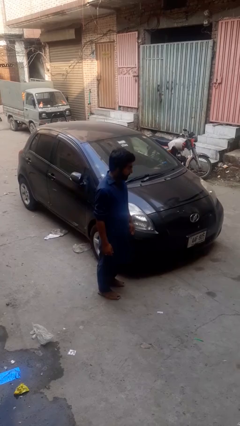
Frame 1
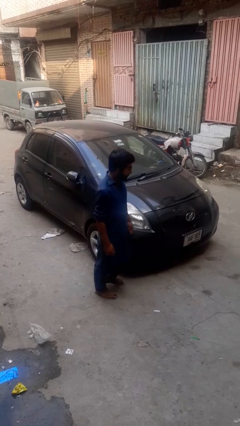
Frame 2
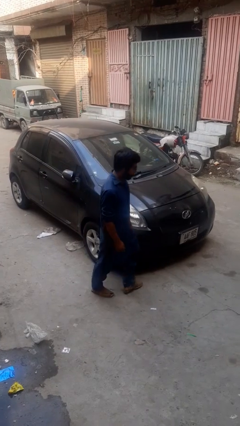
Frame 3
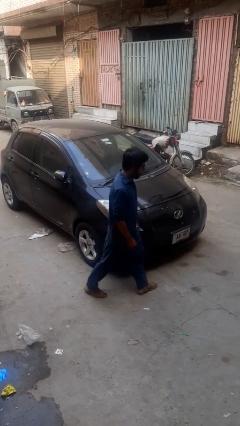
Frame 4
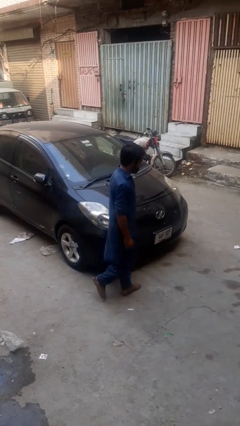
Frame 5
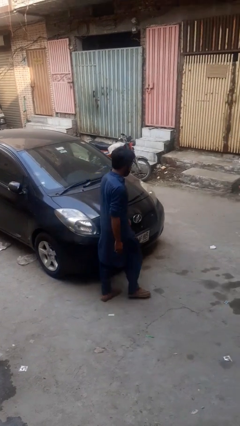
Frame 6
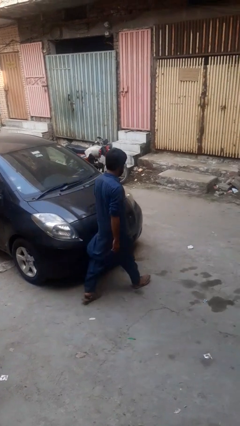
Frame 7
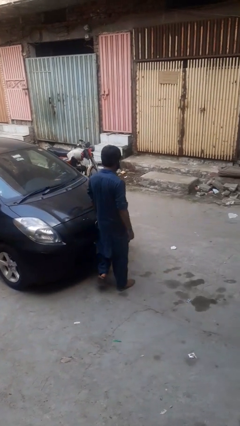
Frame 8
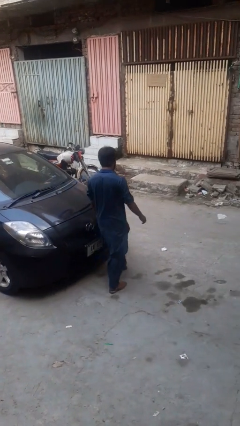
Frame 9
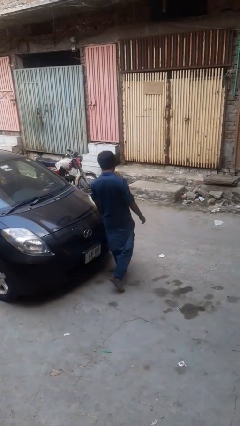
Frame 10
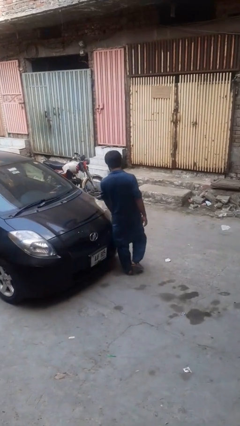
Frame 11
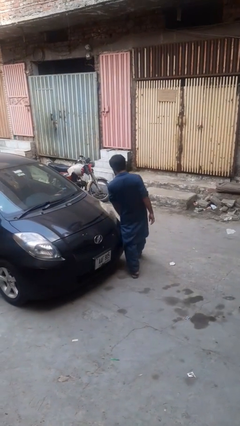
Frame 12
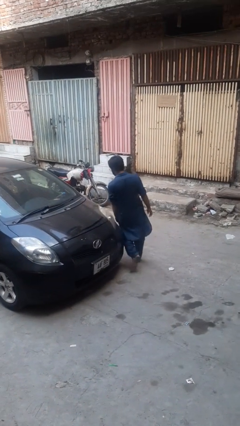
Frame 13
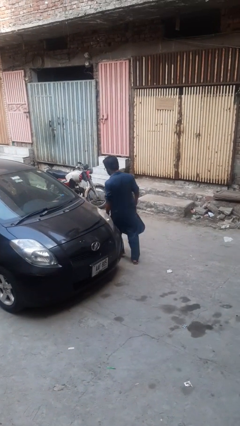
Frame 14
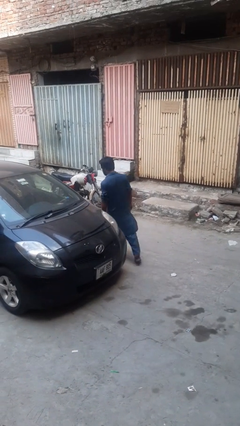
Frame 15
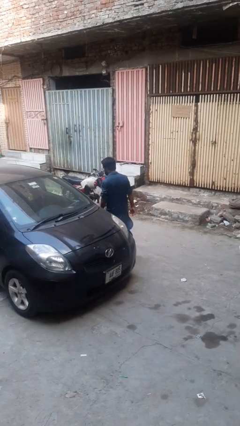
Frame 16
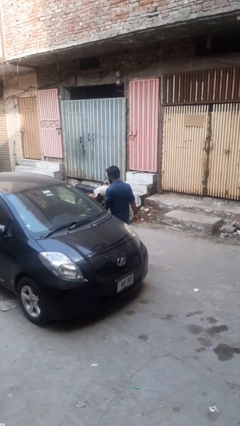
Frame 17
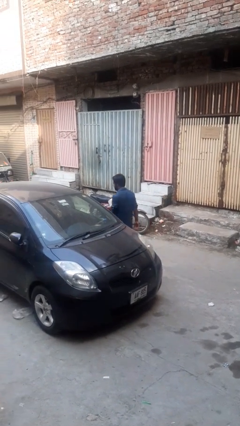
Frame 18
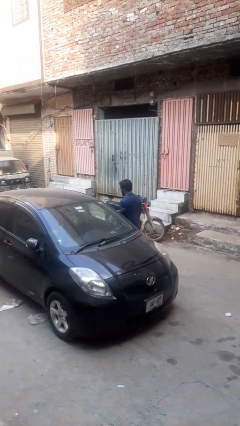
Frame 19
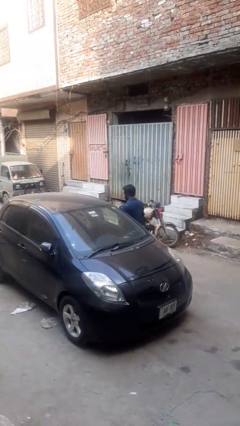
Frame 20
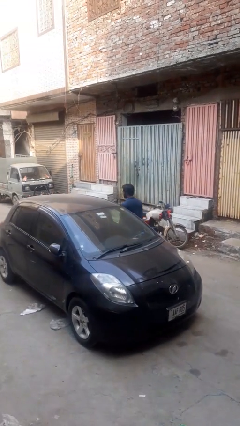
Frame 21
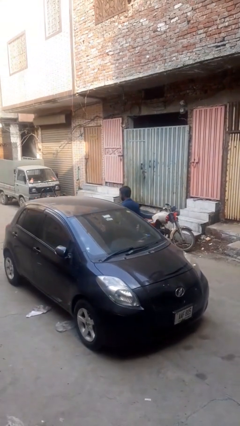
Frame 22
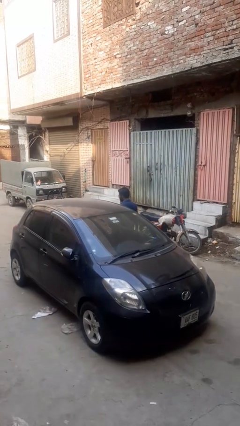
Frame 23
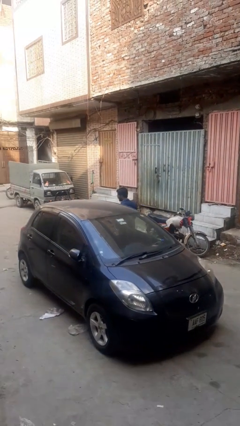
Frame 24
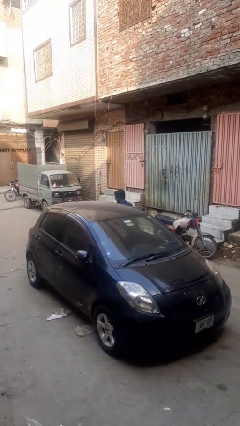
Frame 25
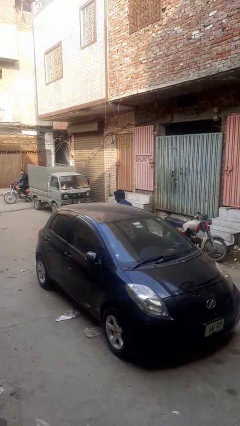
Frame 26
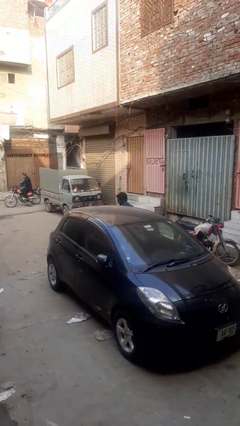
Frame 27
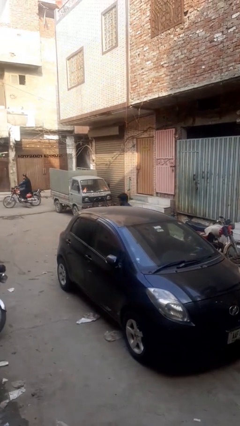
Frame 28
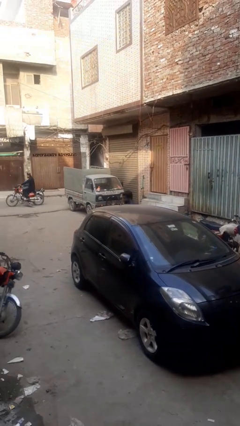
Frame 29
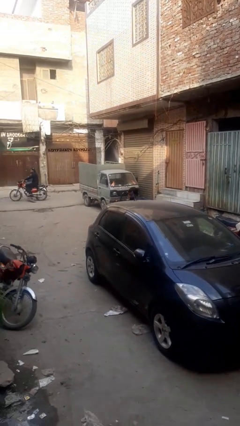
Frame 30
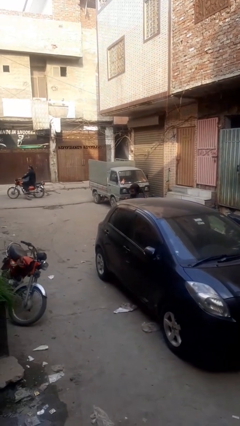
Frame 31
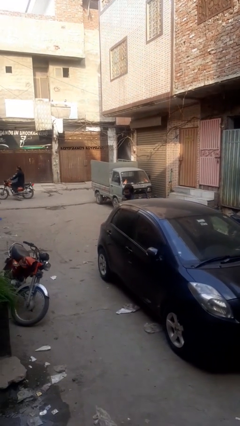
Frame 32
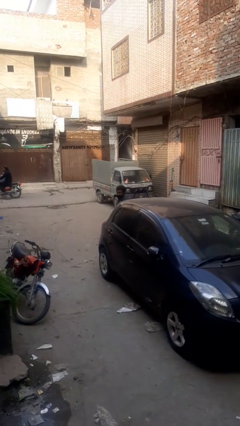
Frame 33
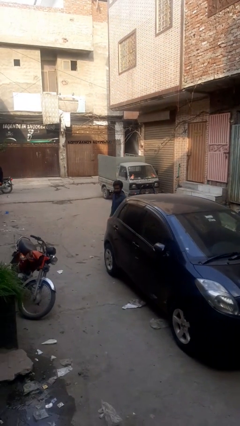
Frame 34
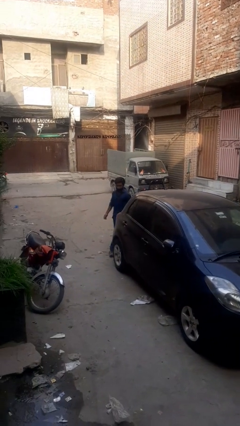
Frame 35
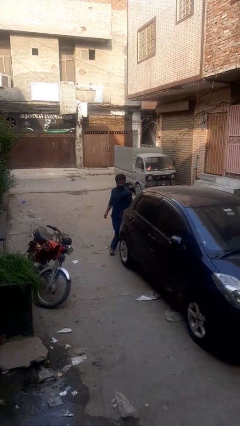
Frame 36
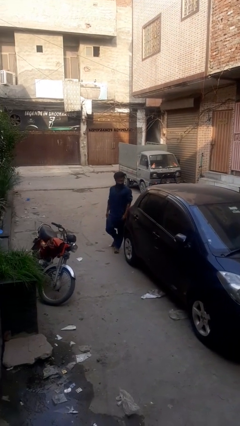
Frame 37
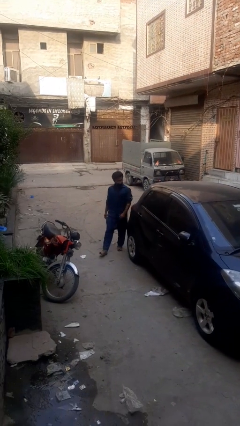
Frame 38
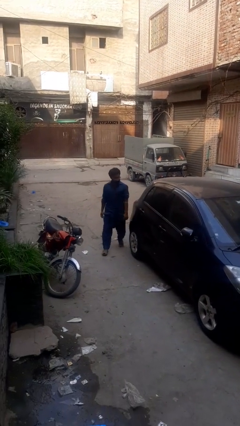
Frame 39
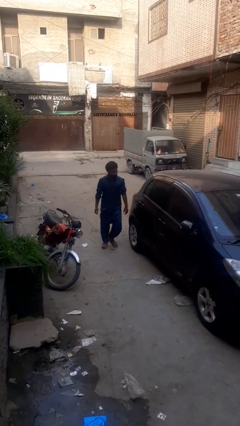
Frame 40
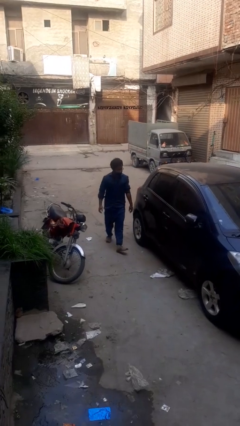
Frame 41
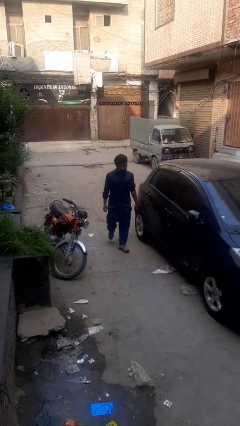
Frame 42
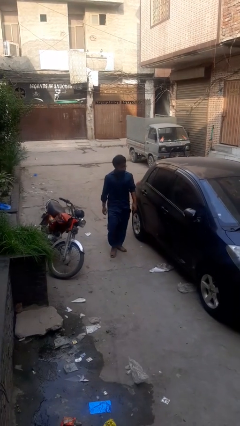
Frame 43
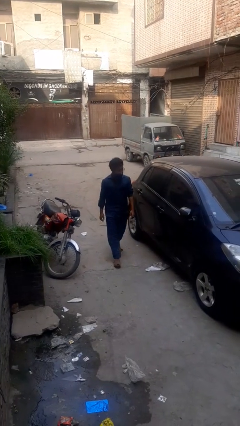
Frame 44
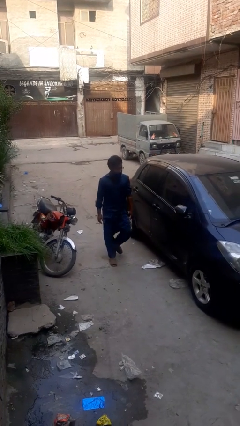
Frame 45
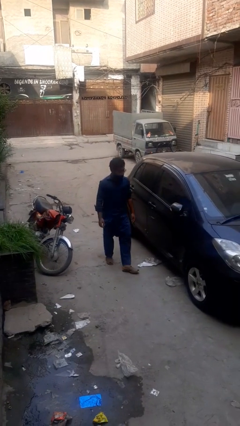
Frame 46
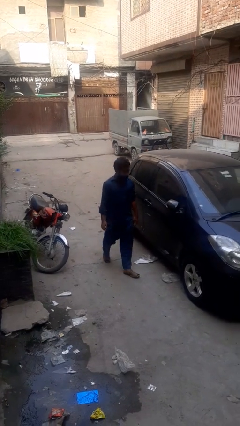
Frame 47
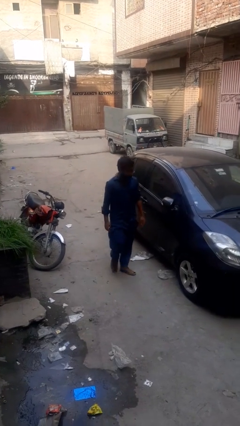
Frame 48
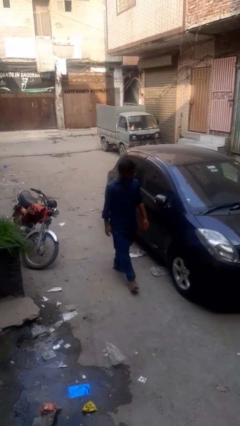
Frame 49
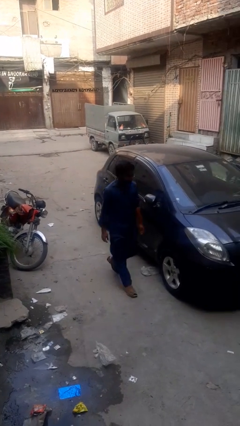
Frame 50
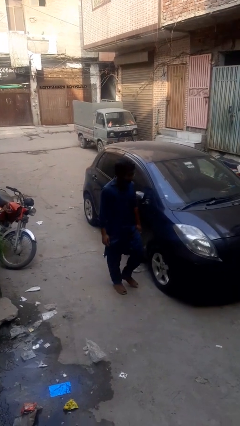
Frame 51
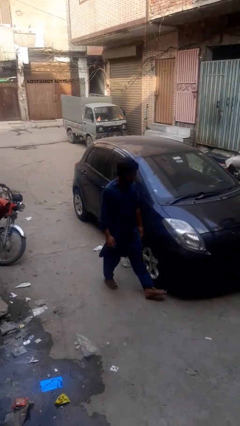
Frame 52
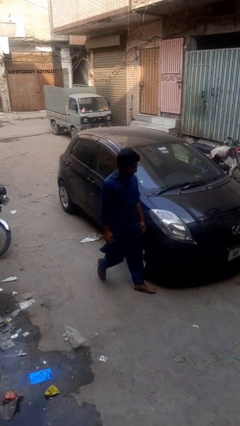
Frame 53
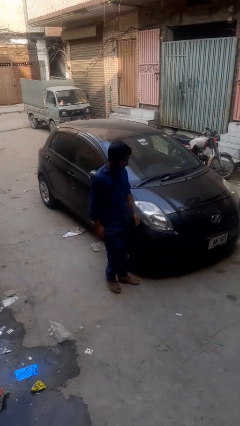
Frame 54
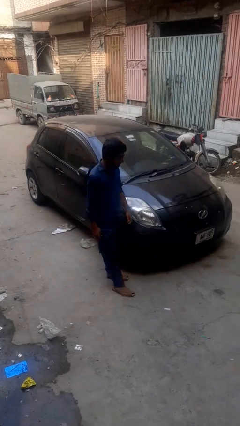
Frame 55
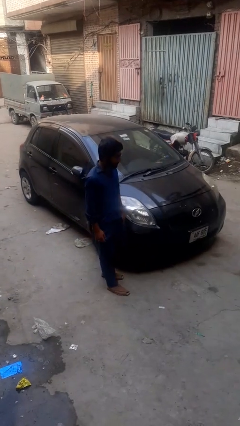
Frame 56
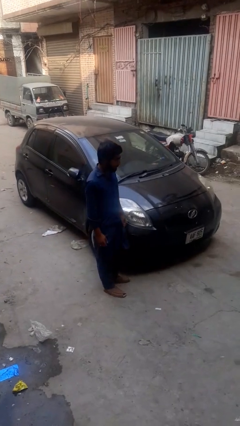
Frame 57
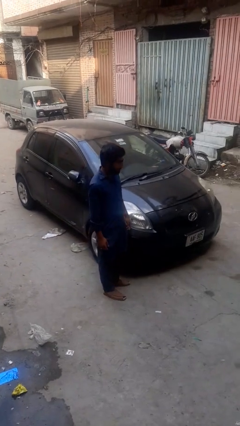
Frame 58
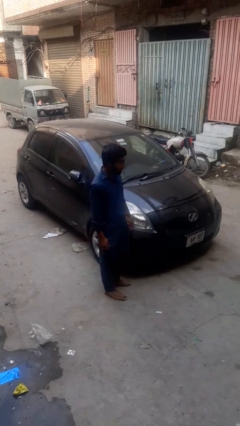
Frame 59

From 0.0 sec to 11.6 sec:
person walks around car

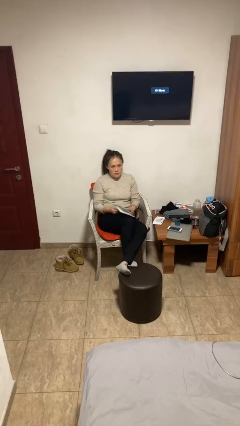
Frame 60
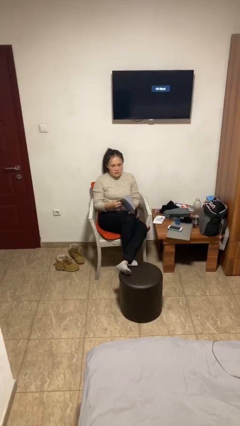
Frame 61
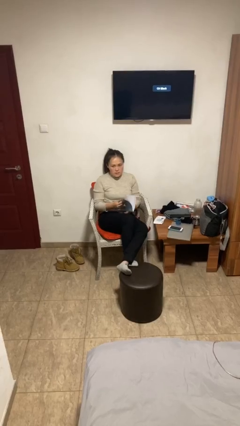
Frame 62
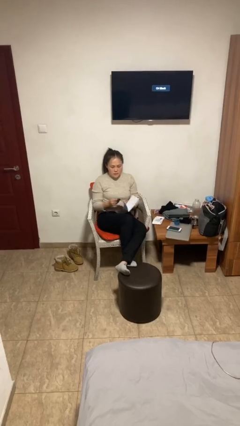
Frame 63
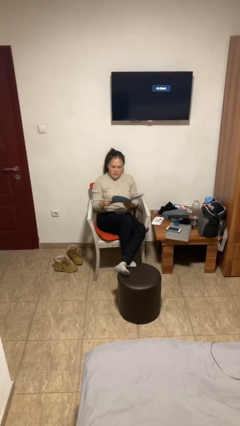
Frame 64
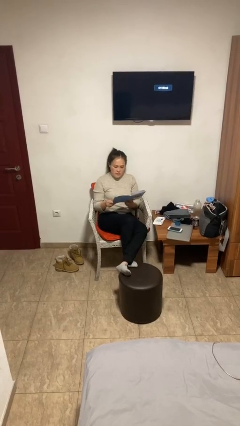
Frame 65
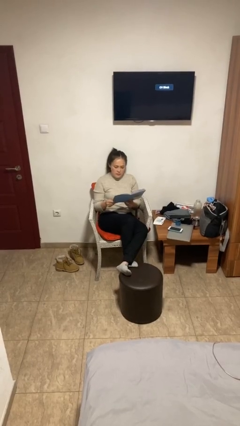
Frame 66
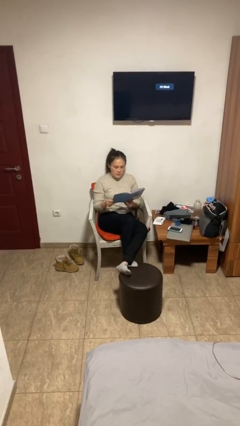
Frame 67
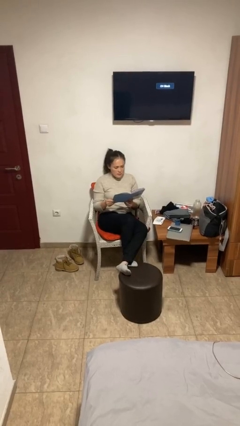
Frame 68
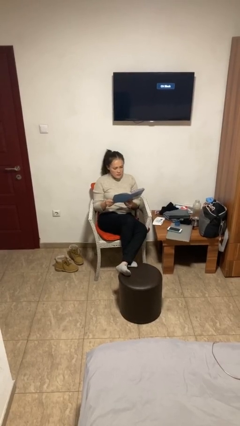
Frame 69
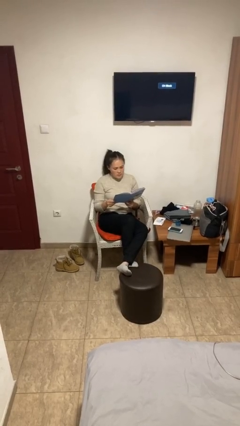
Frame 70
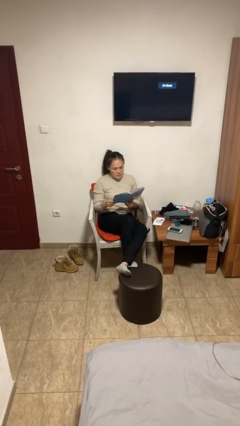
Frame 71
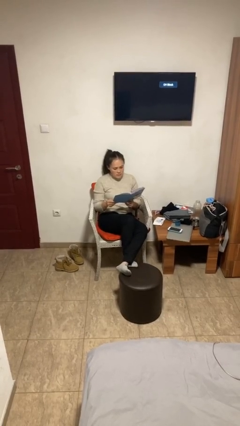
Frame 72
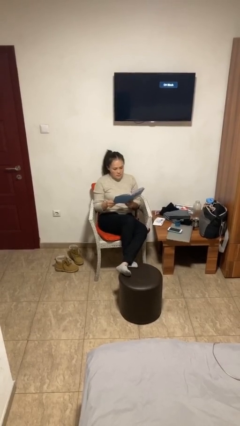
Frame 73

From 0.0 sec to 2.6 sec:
person reads document

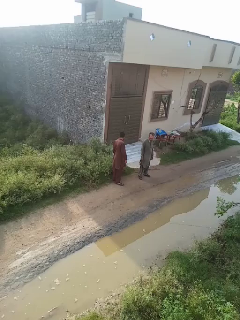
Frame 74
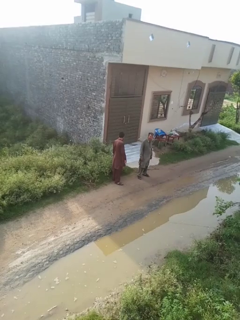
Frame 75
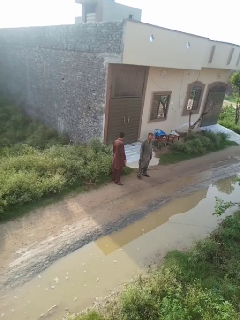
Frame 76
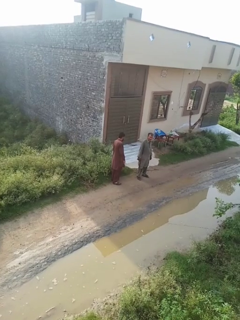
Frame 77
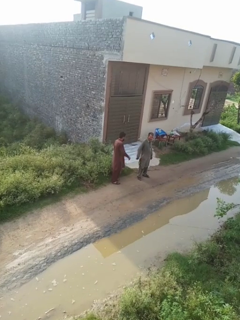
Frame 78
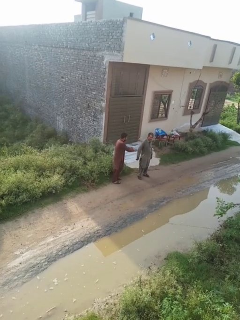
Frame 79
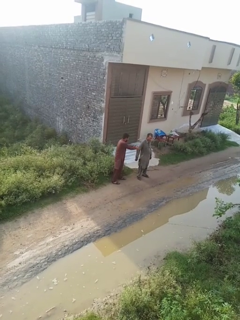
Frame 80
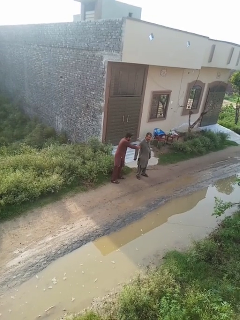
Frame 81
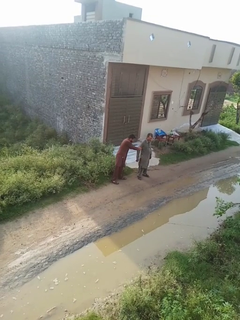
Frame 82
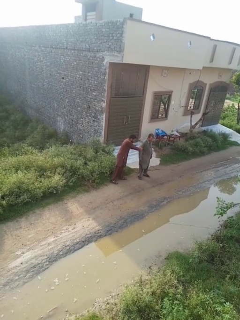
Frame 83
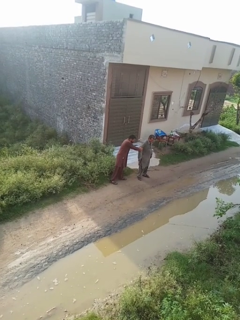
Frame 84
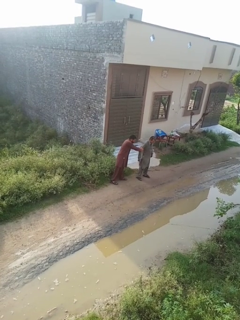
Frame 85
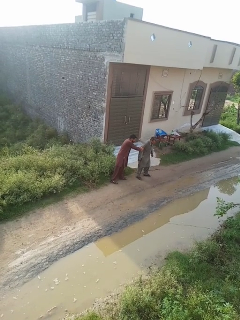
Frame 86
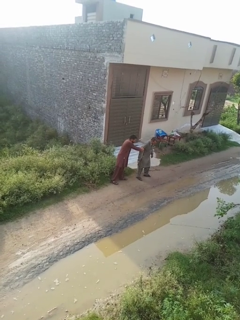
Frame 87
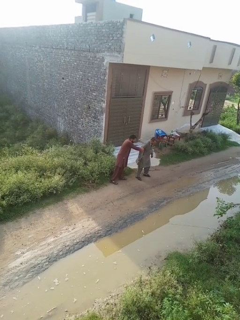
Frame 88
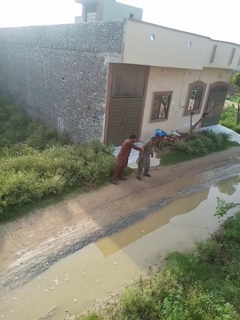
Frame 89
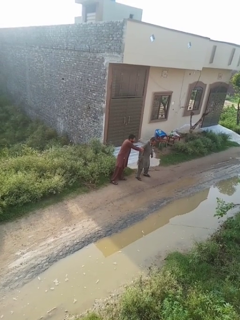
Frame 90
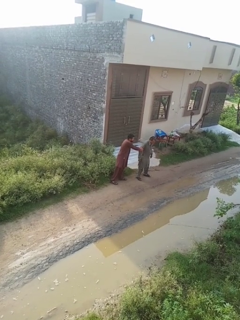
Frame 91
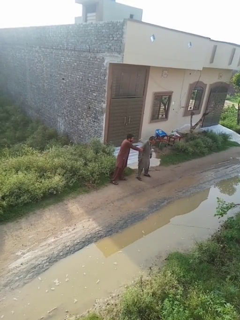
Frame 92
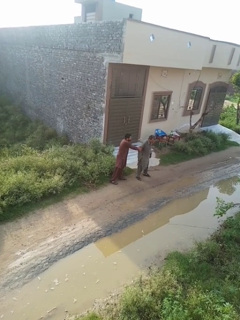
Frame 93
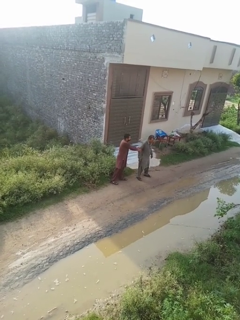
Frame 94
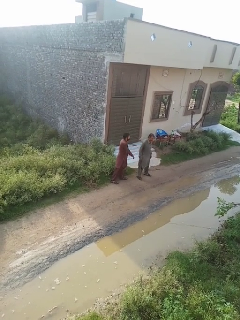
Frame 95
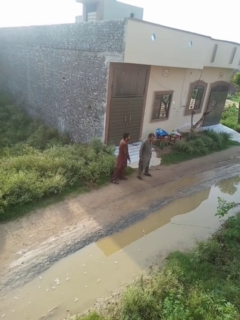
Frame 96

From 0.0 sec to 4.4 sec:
person grabs person by bicep

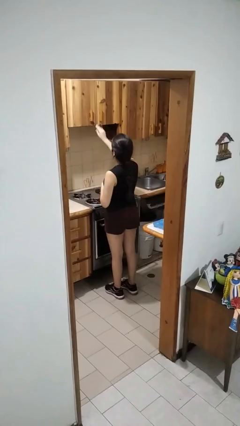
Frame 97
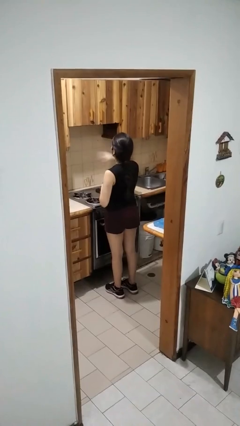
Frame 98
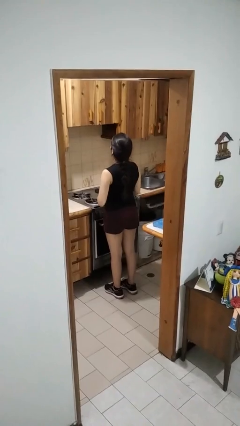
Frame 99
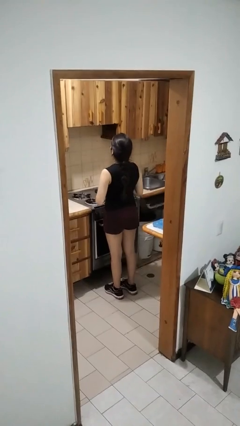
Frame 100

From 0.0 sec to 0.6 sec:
person closes cabinet
